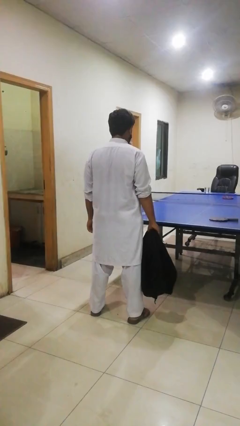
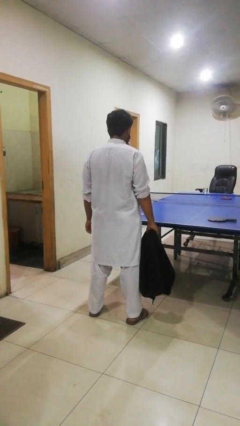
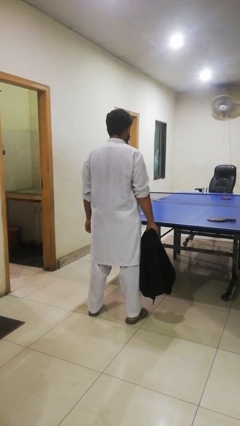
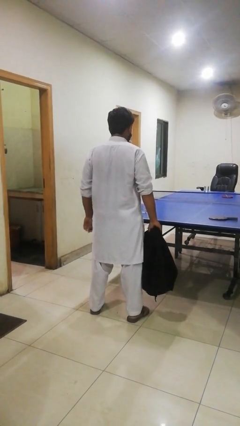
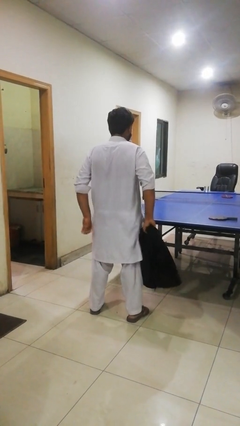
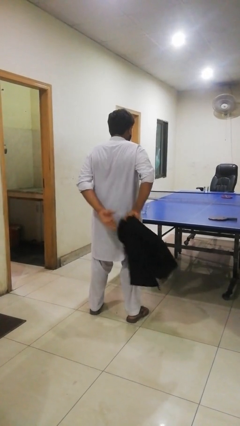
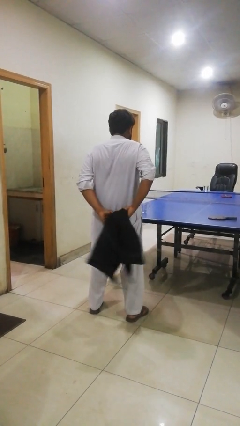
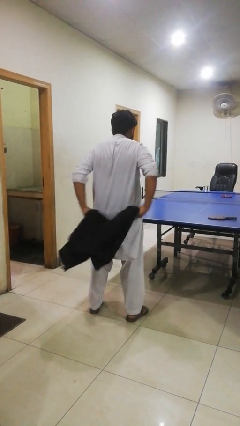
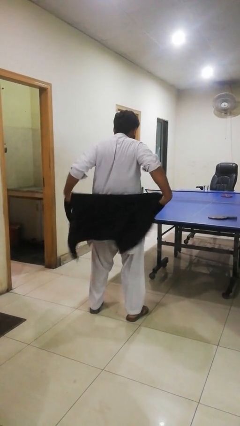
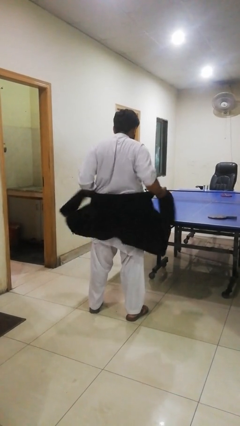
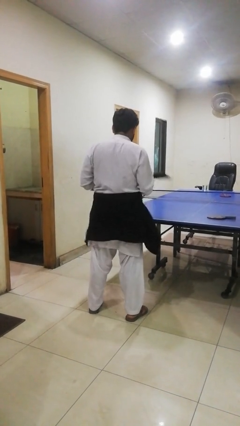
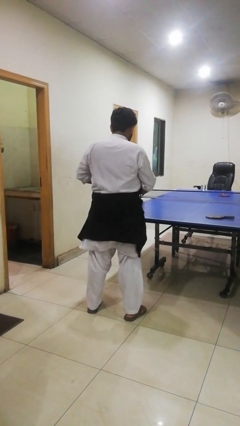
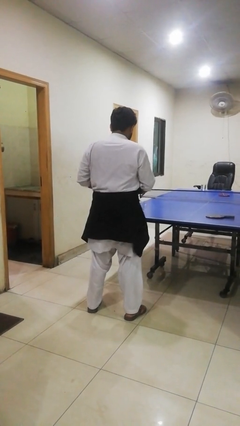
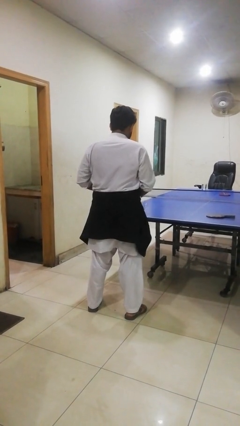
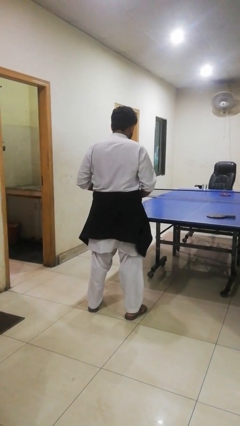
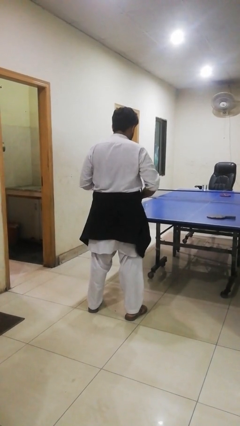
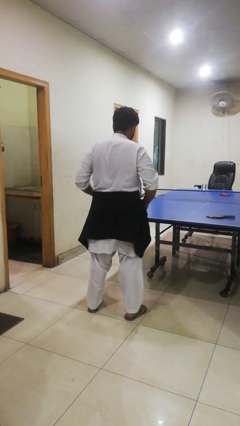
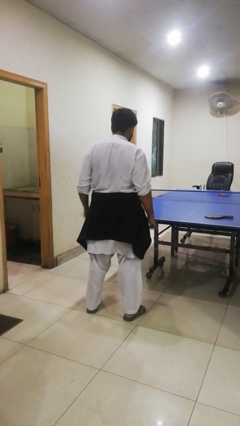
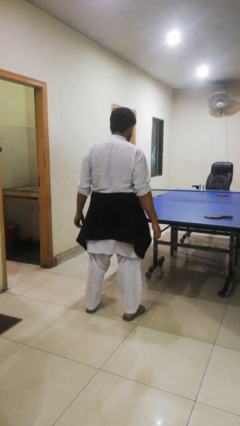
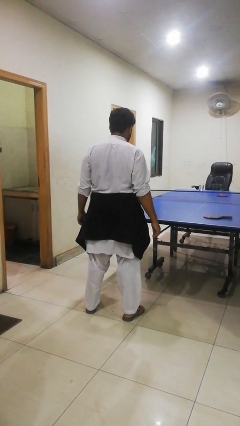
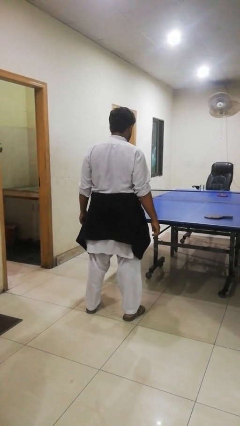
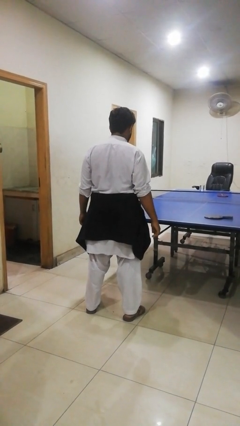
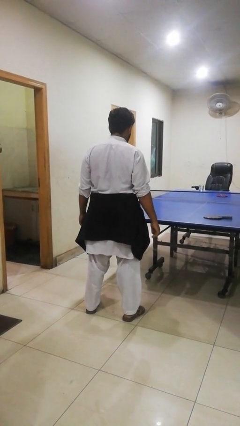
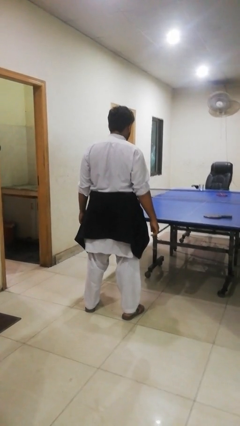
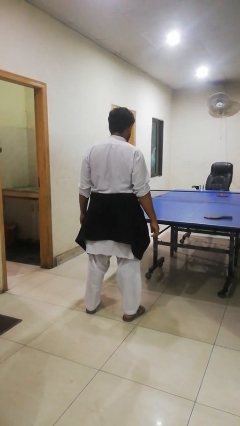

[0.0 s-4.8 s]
person ties jacket around waist

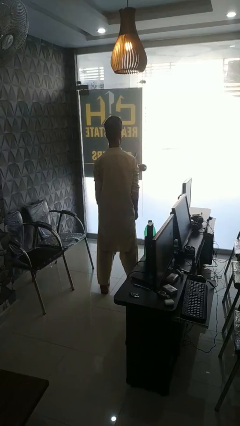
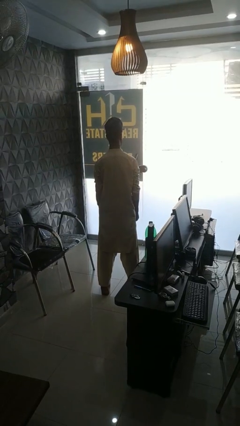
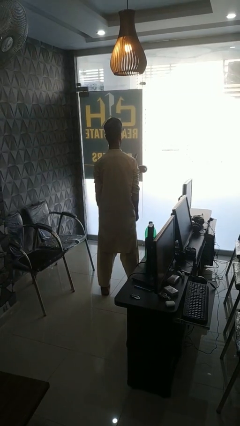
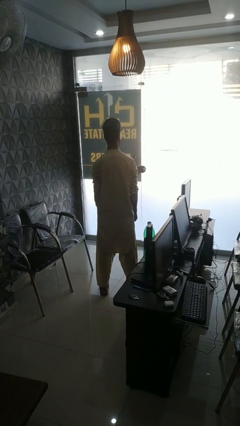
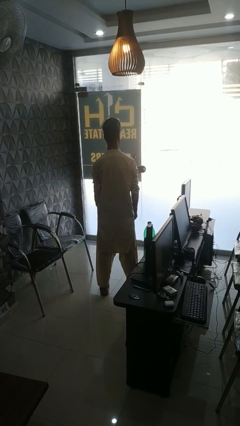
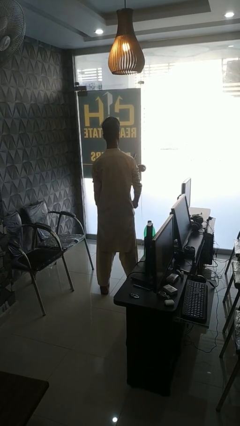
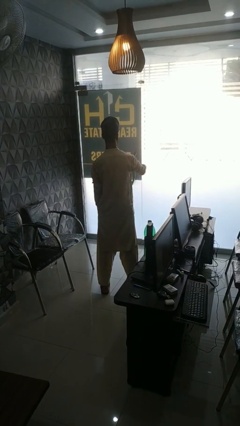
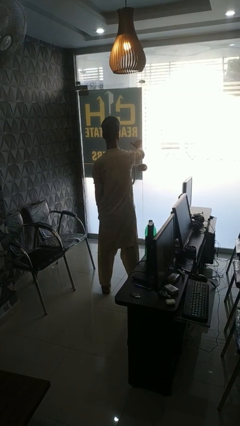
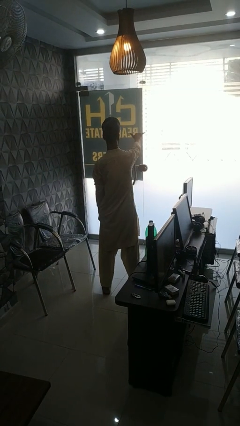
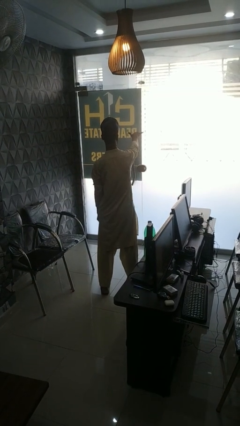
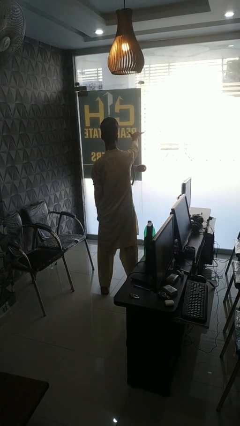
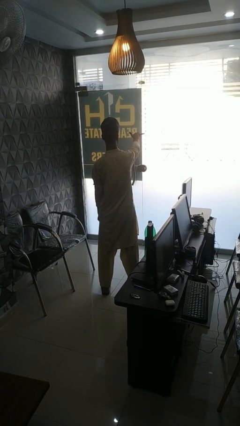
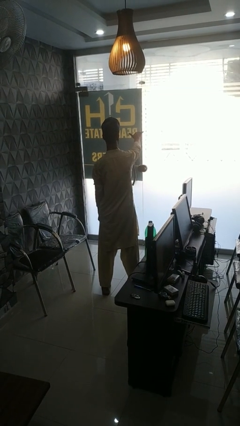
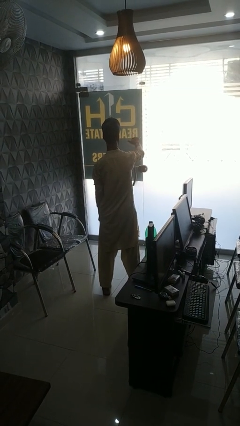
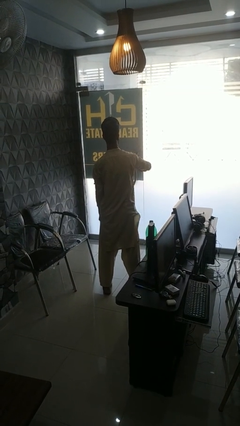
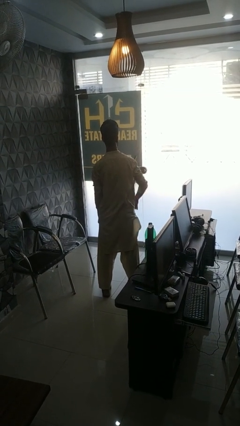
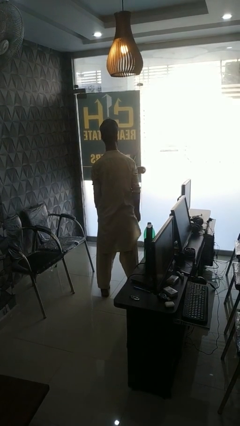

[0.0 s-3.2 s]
person gestures hang loose

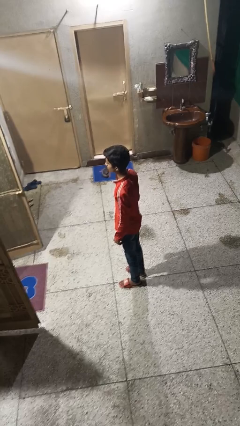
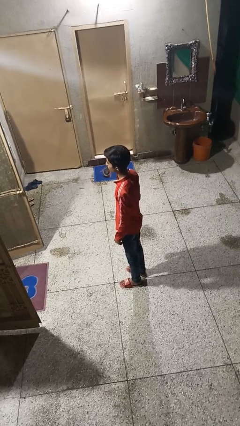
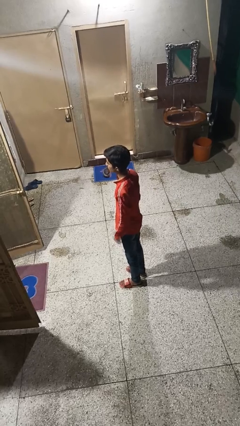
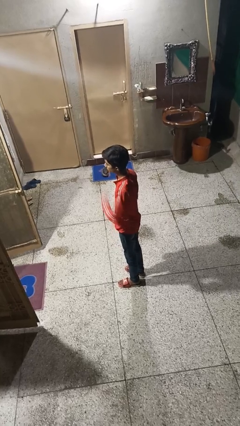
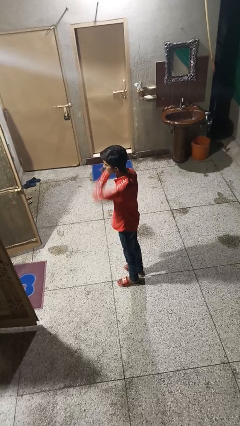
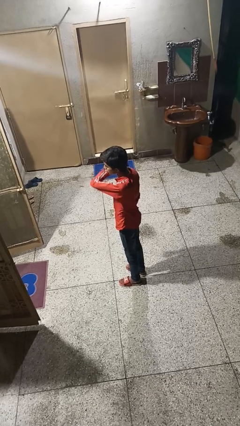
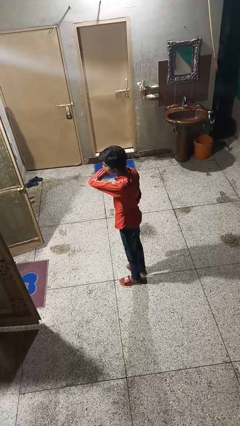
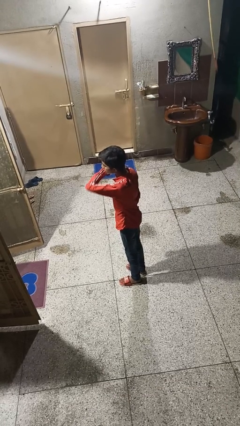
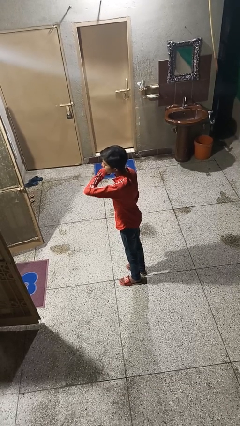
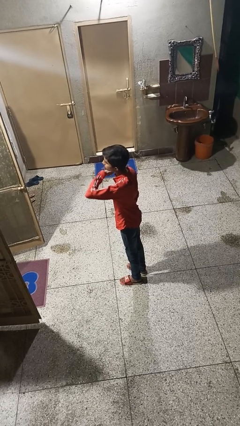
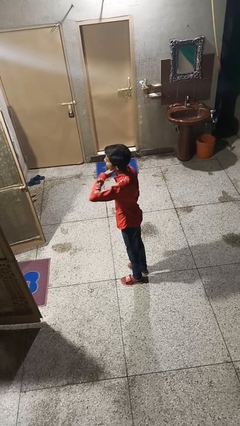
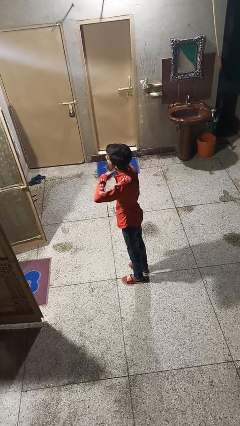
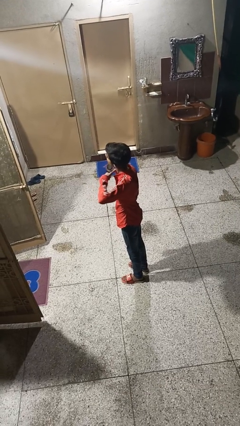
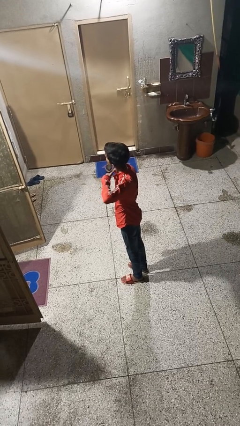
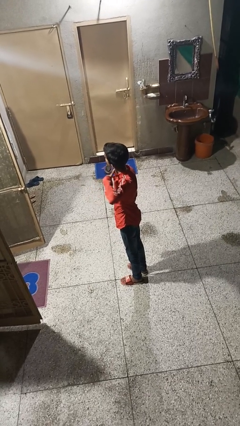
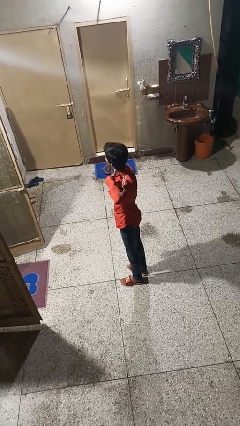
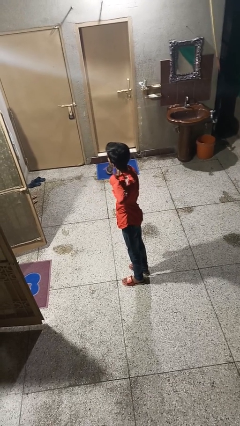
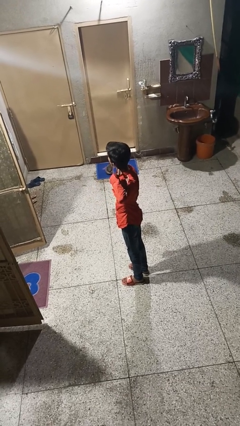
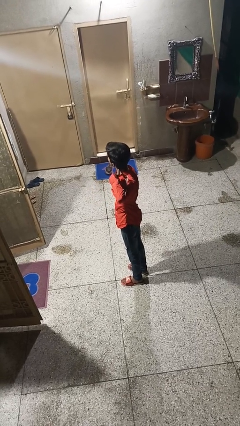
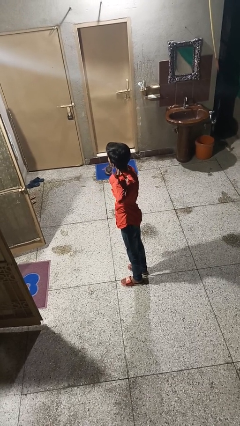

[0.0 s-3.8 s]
person gestures cut

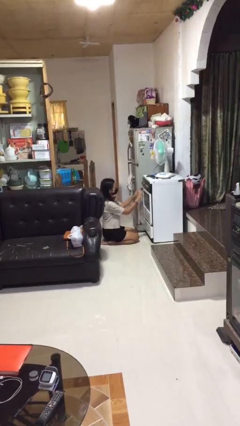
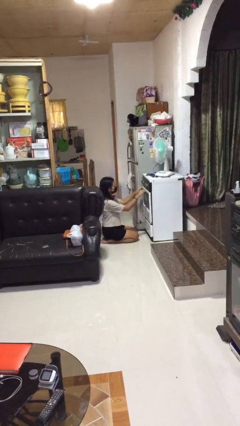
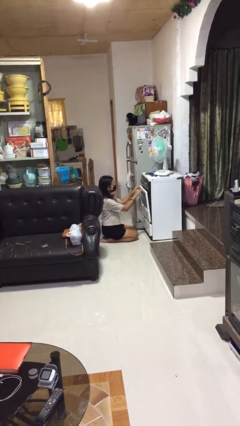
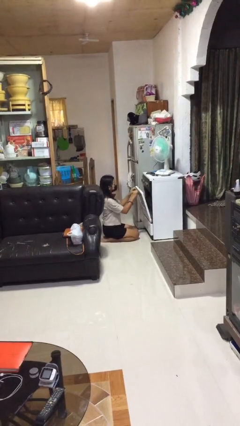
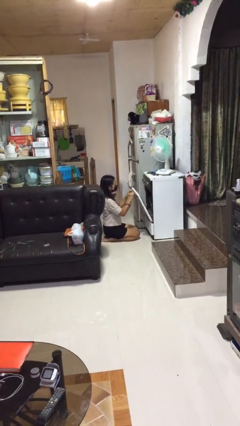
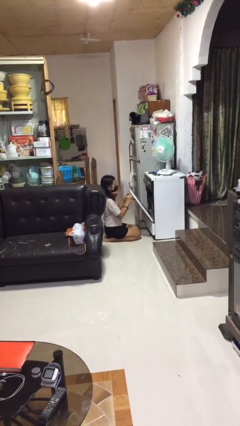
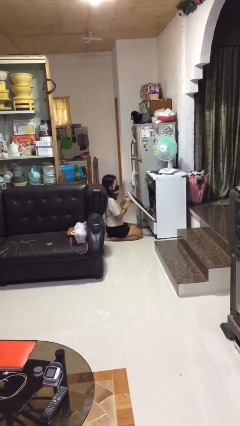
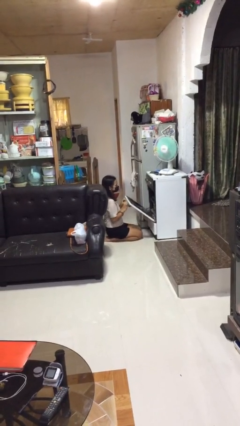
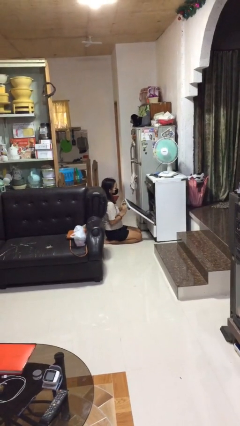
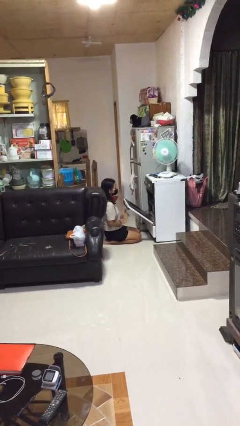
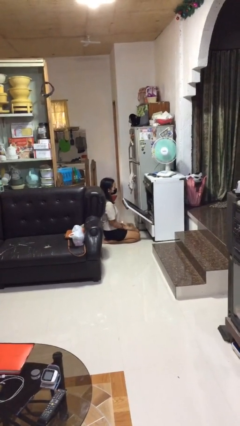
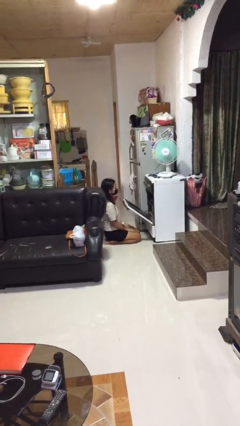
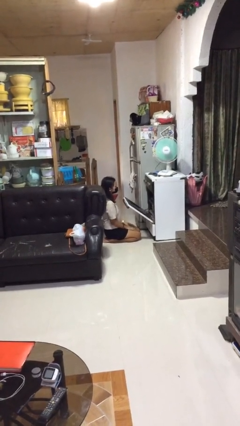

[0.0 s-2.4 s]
person opens oven door

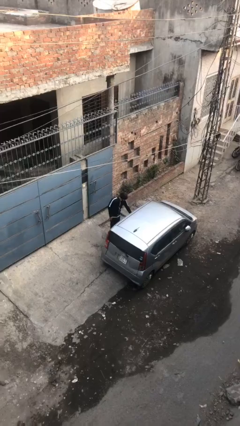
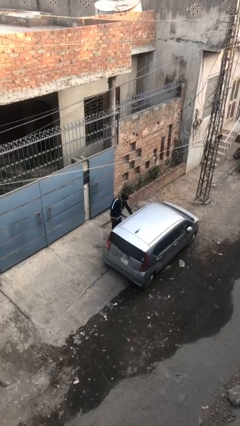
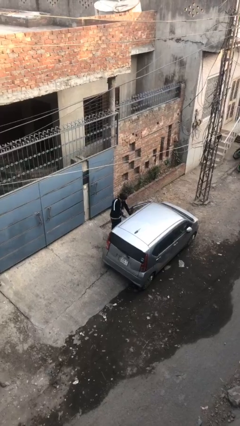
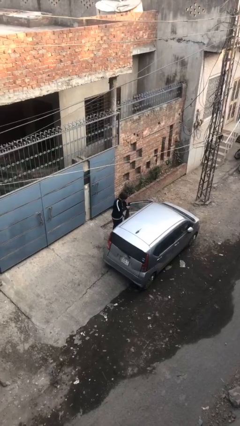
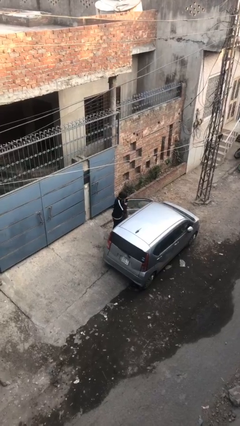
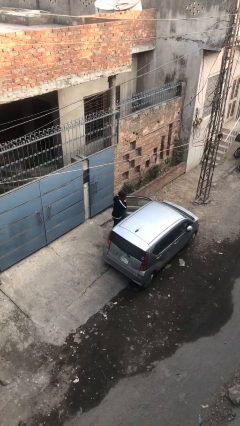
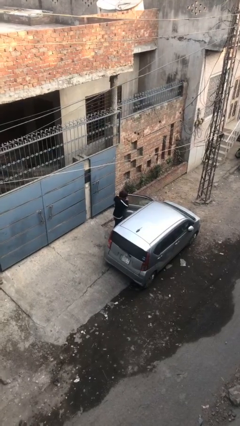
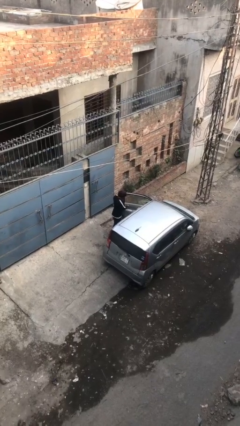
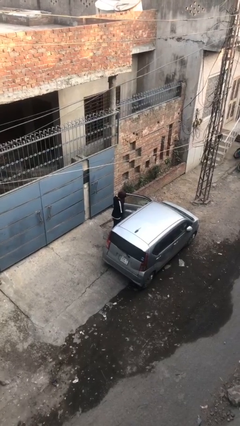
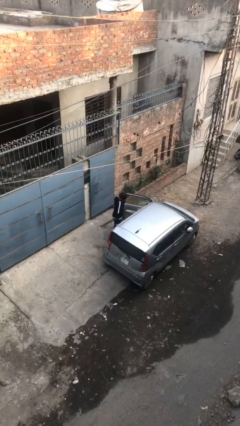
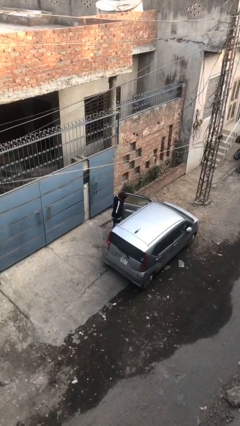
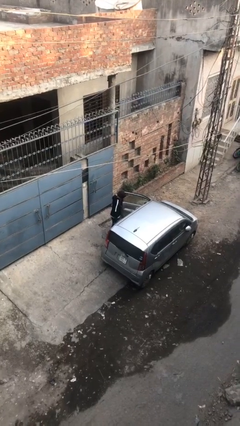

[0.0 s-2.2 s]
person opens car door

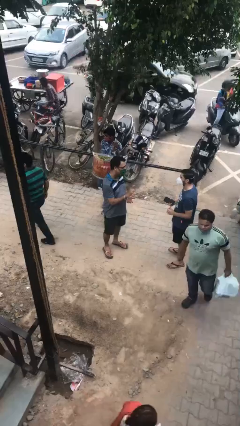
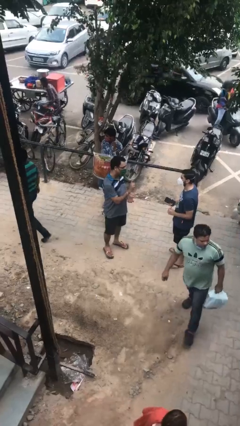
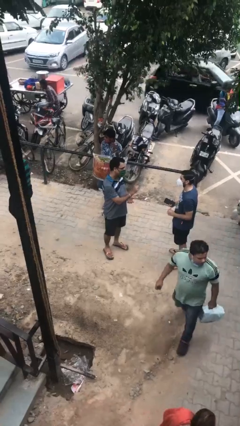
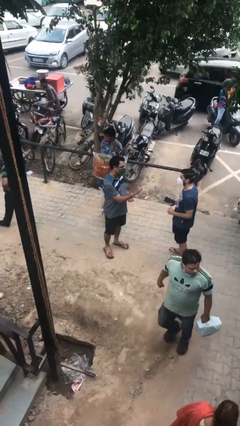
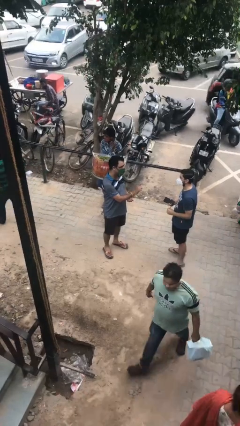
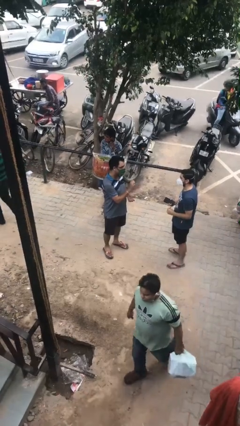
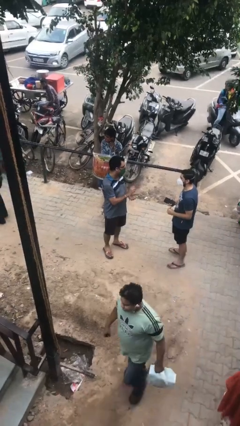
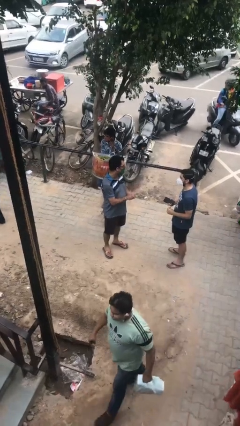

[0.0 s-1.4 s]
person points at person
